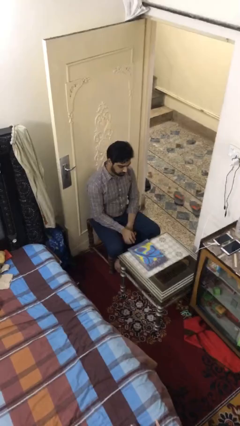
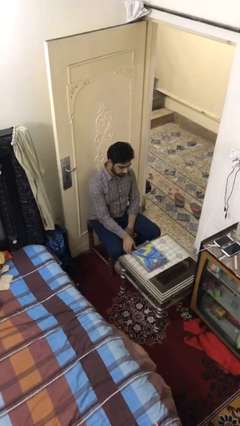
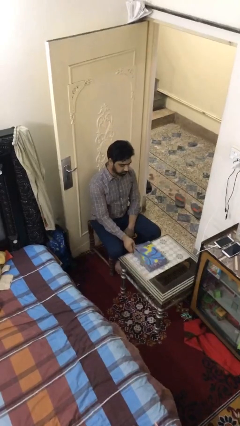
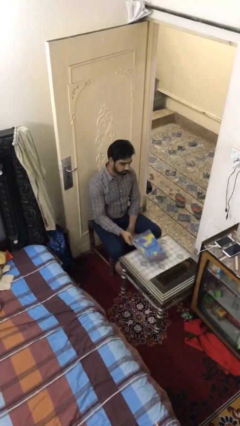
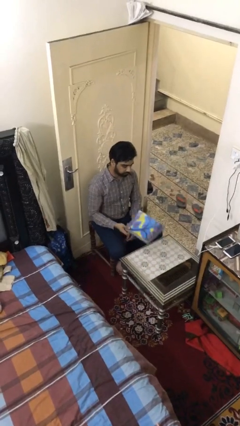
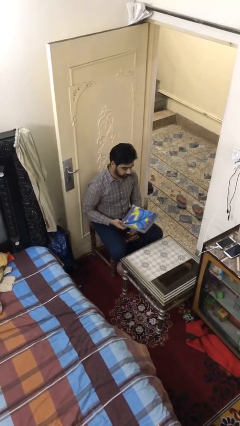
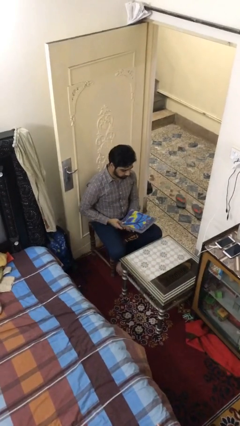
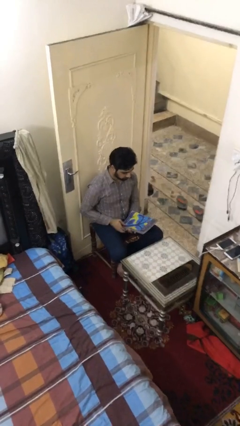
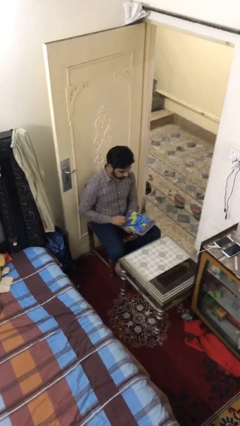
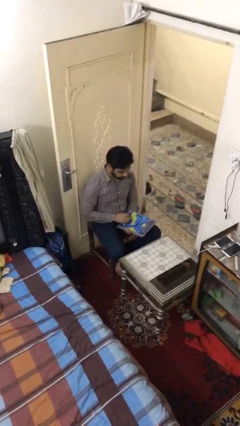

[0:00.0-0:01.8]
person picks up object from table

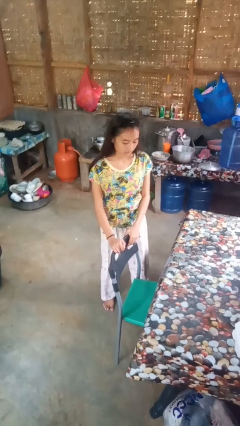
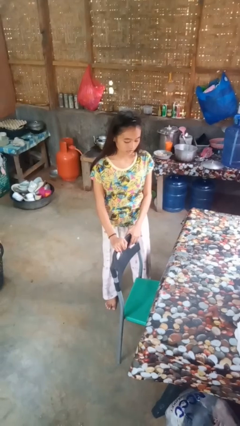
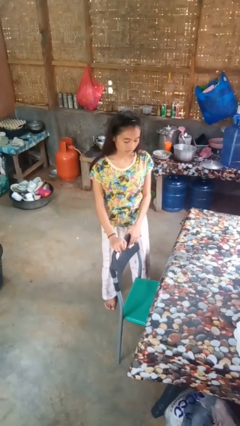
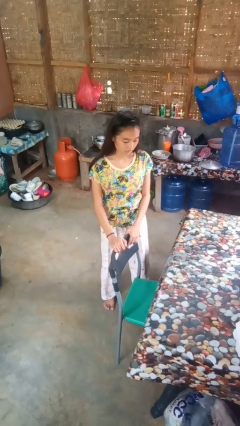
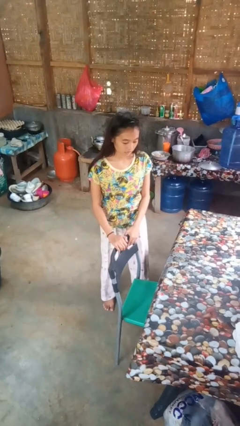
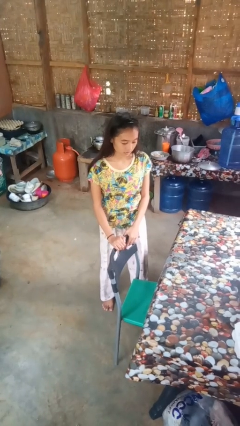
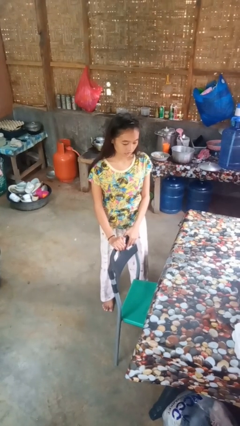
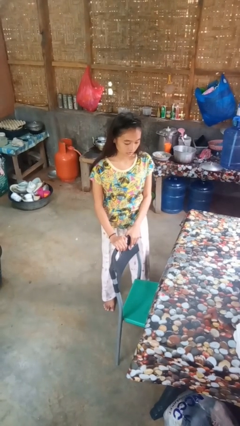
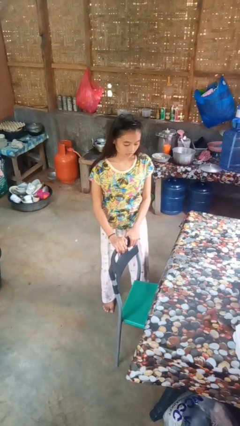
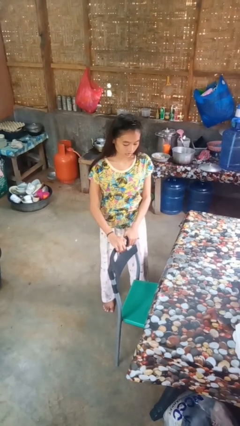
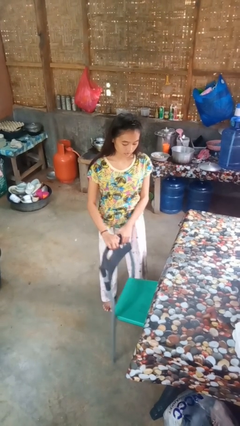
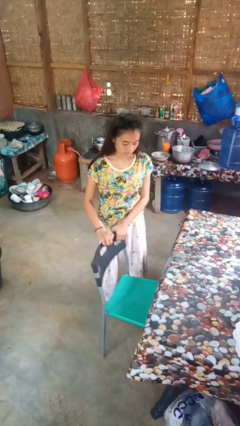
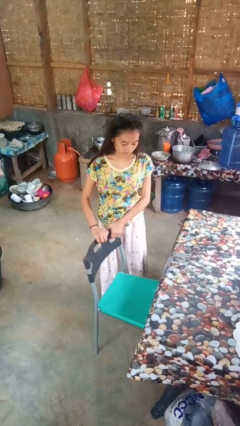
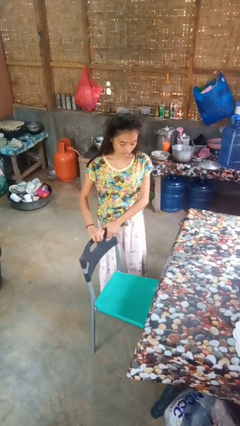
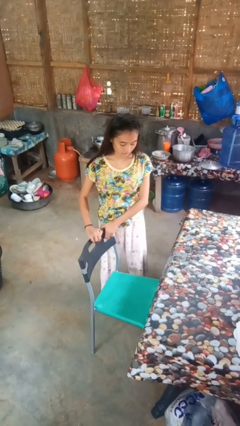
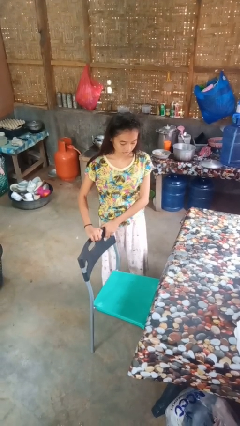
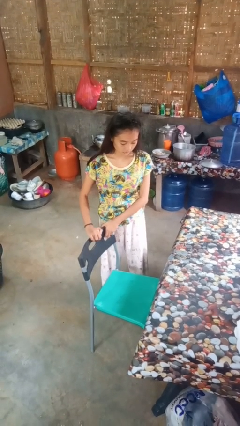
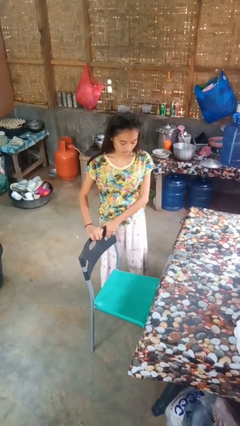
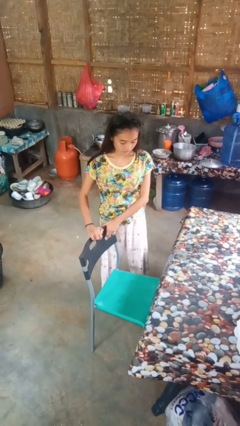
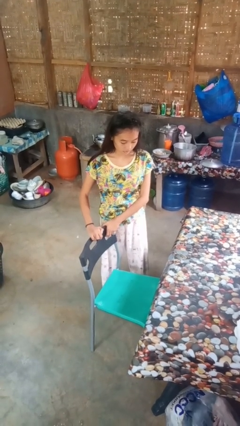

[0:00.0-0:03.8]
person pulls out chair

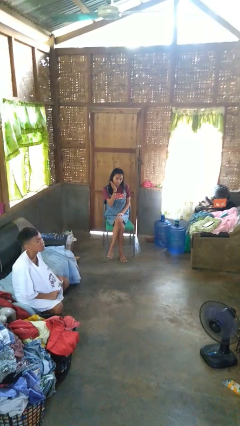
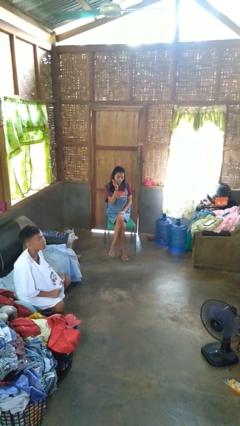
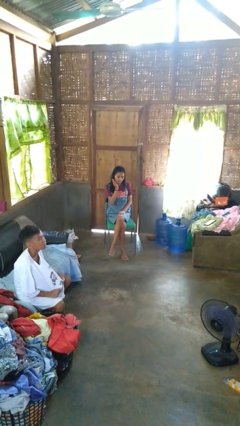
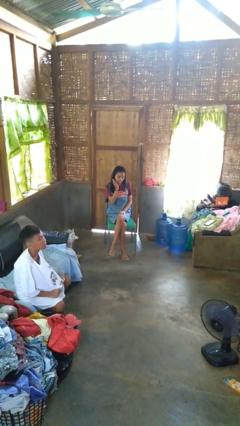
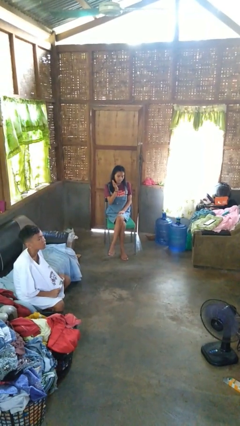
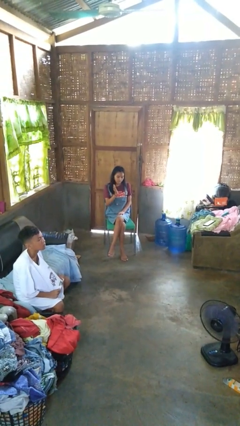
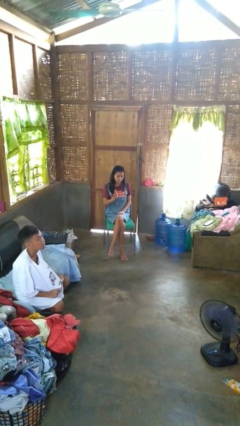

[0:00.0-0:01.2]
person swats bug

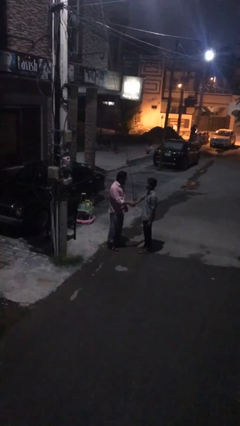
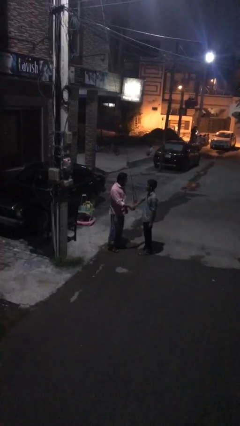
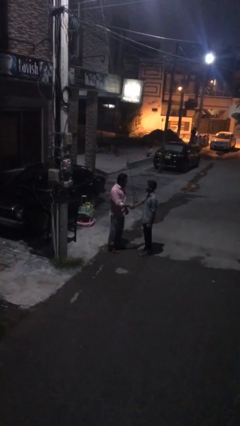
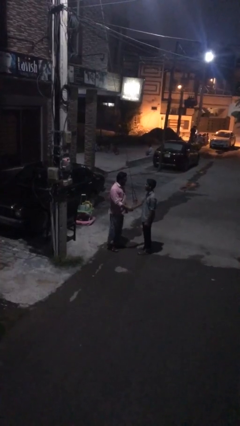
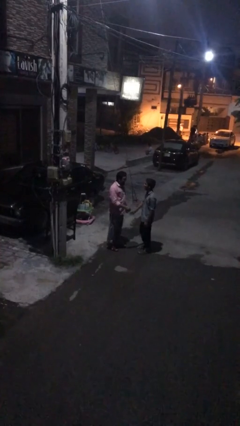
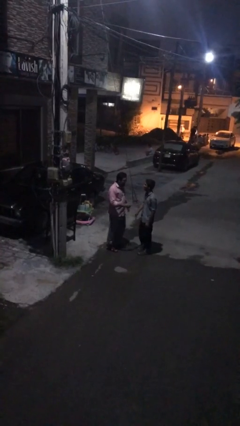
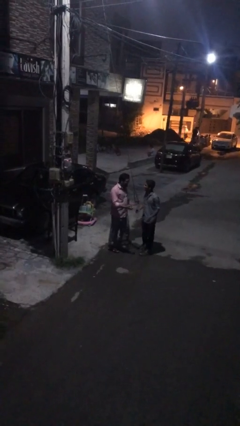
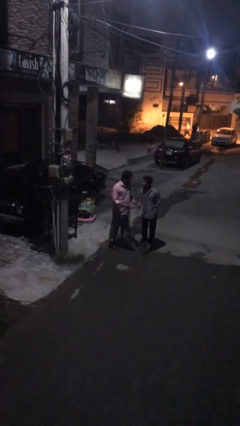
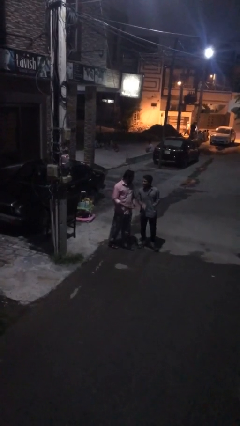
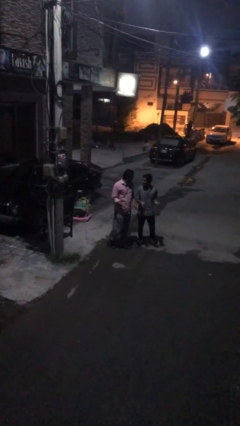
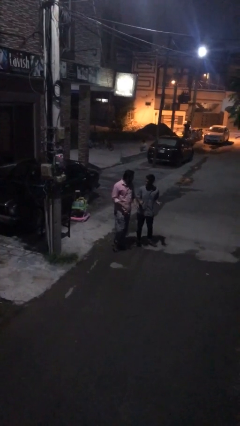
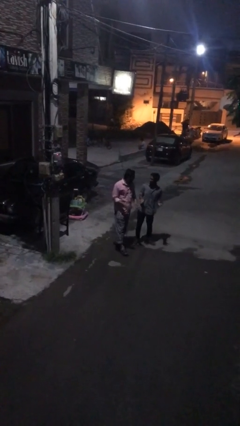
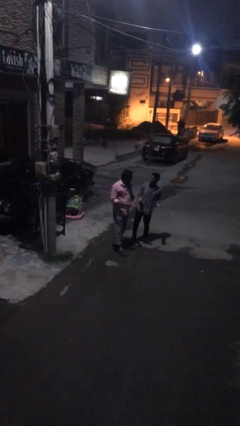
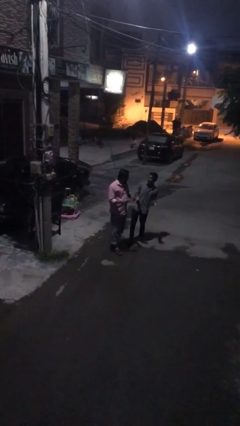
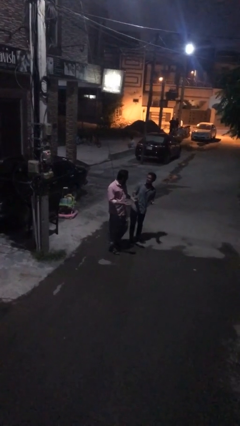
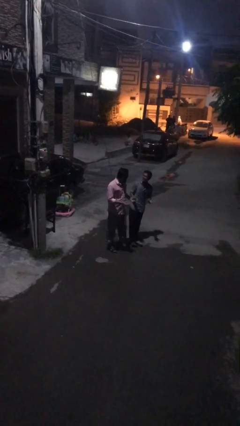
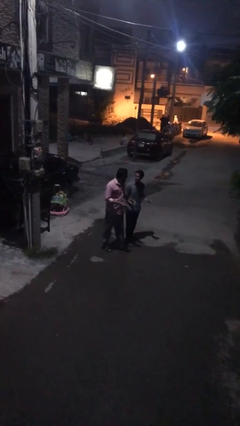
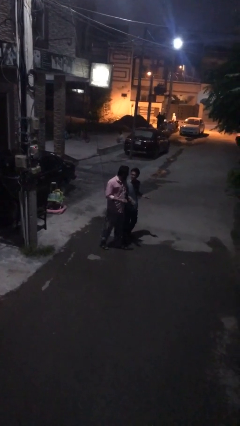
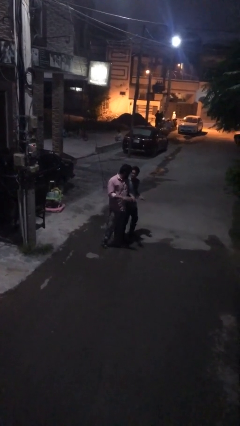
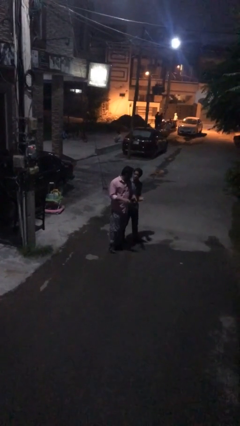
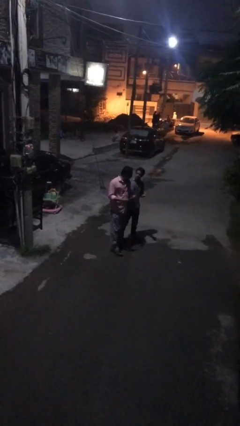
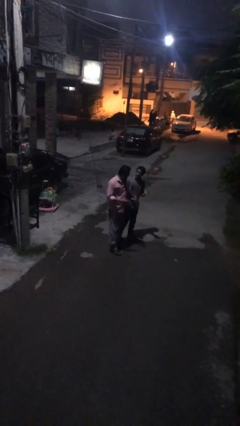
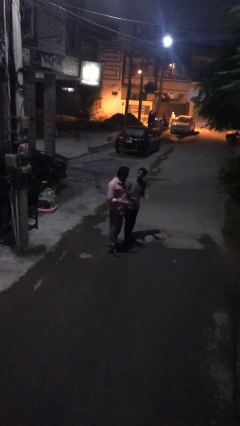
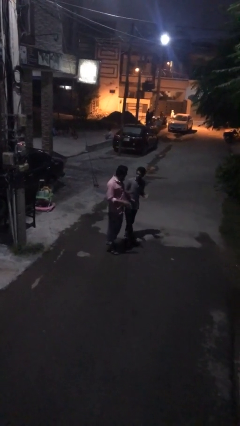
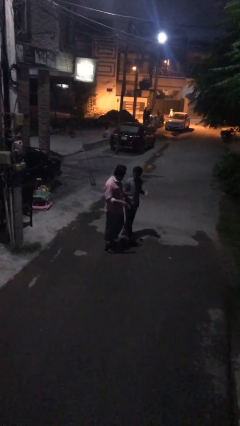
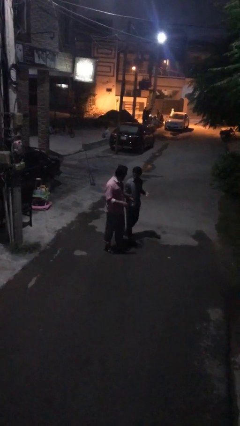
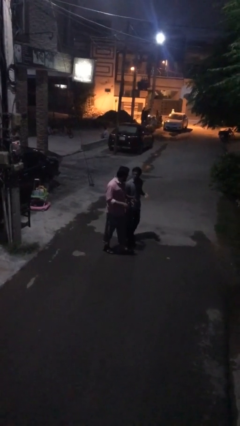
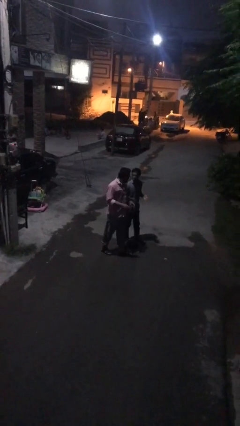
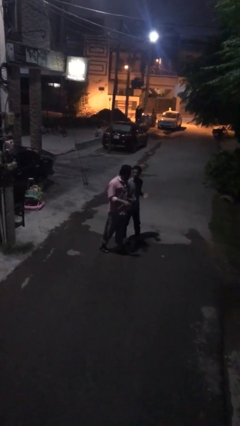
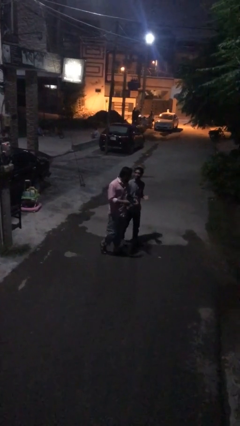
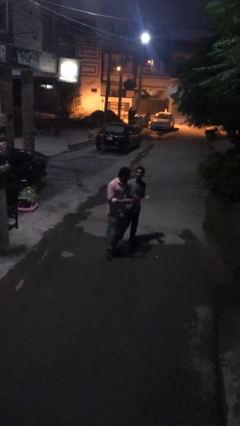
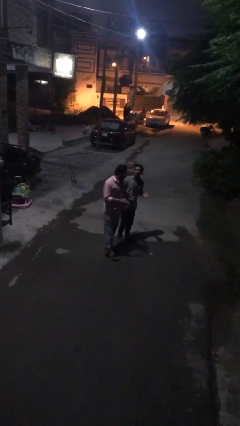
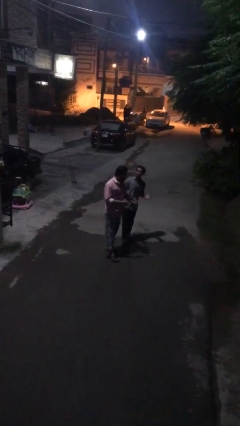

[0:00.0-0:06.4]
person talks to person

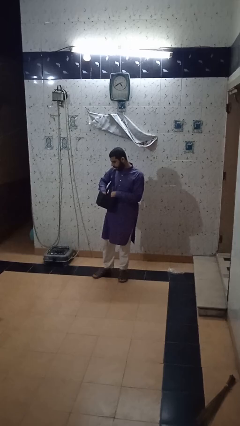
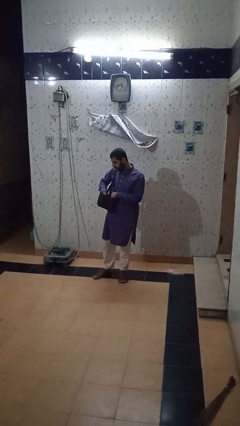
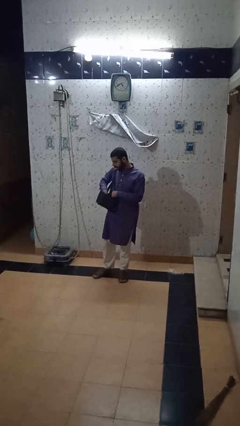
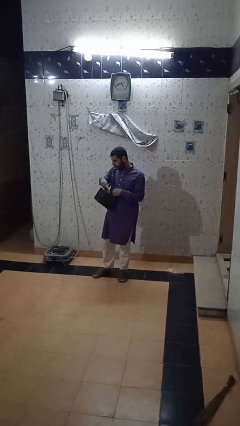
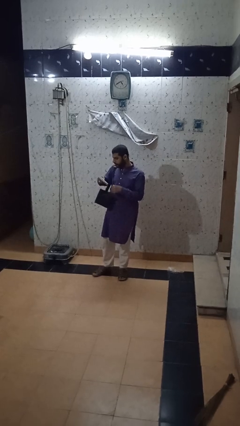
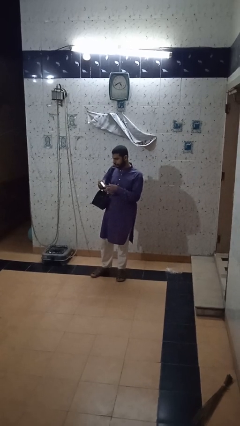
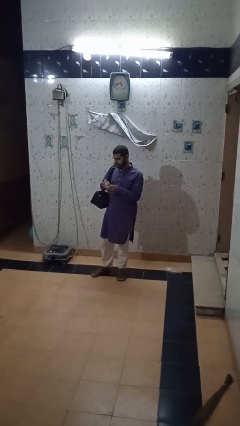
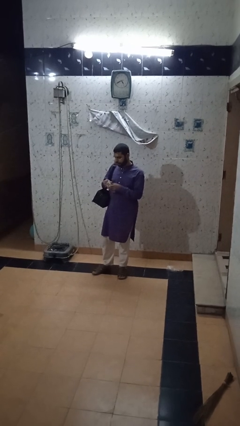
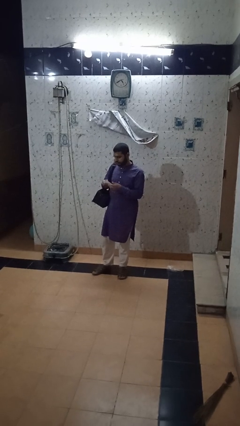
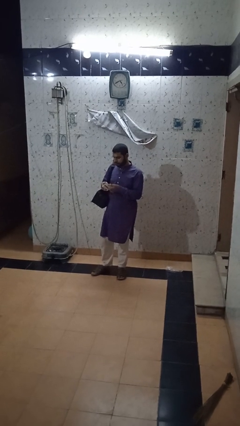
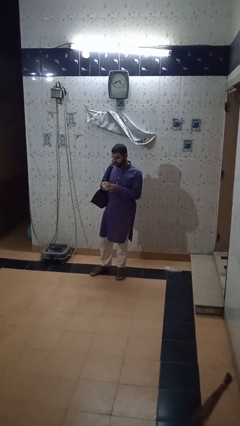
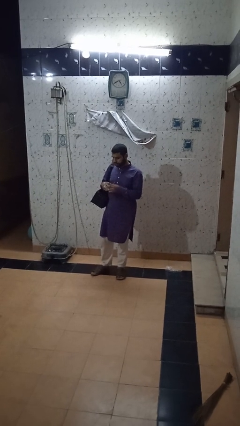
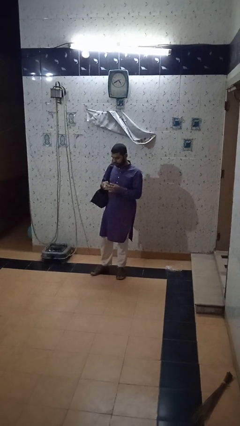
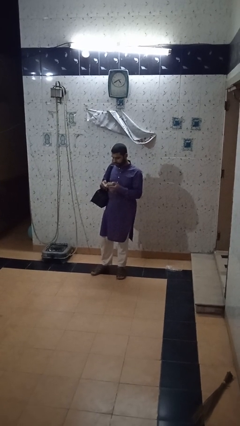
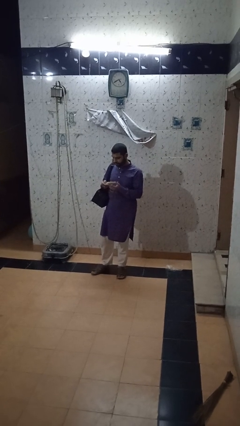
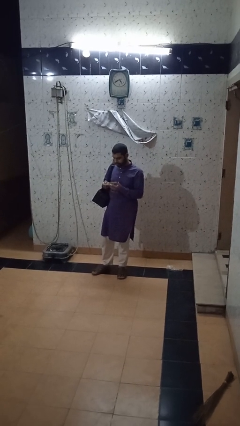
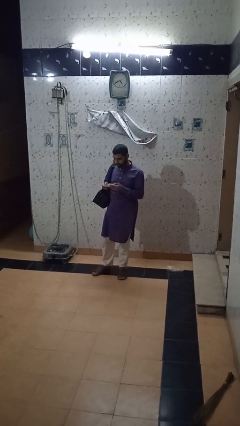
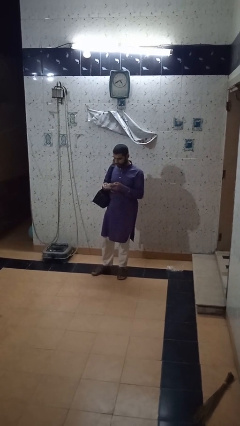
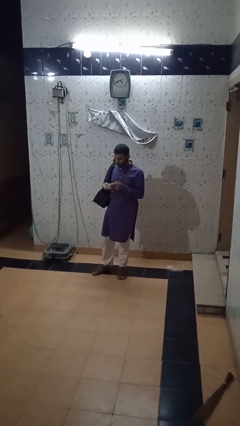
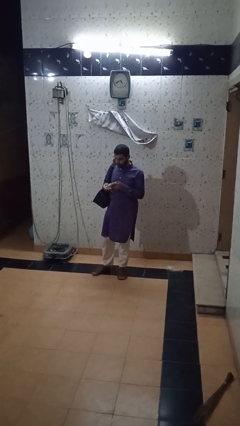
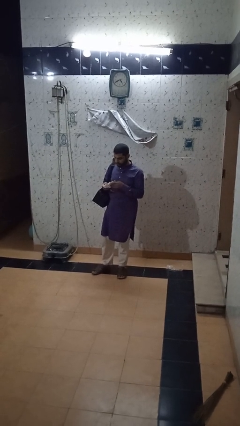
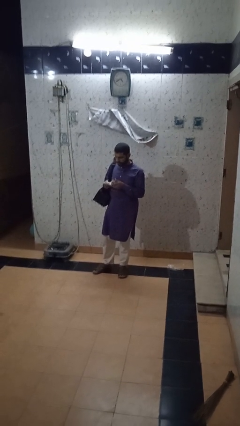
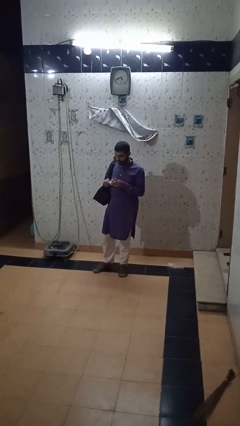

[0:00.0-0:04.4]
person takes object from backpack

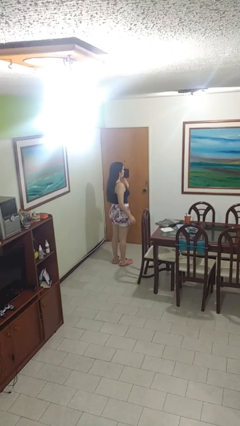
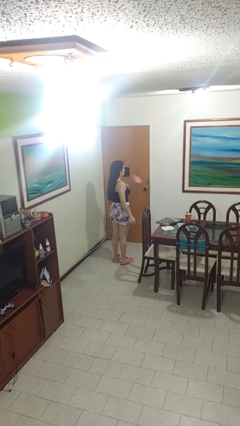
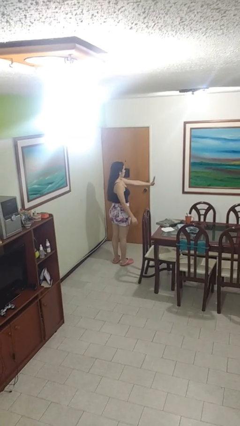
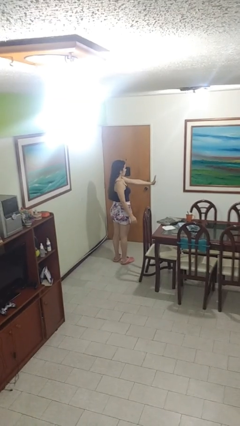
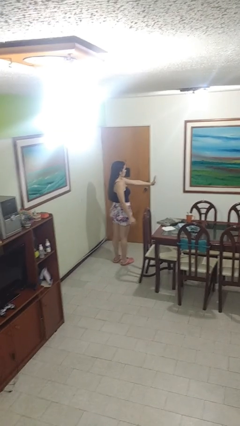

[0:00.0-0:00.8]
person gestures stop
